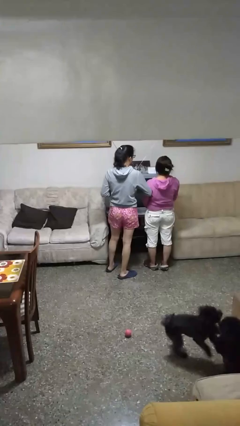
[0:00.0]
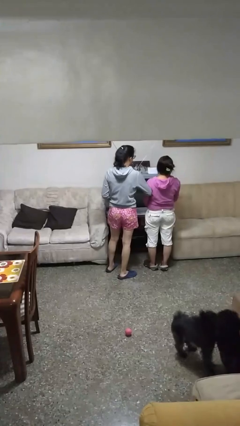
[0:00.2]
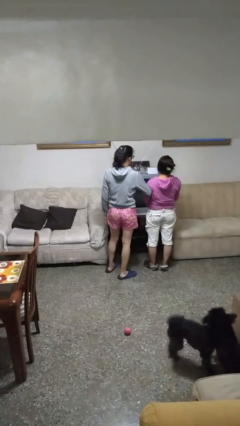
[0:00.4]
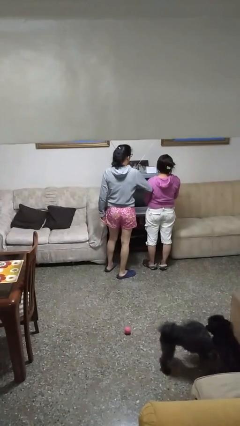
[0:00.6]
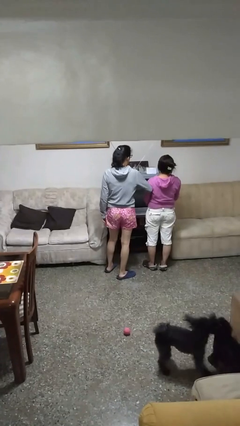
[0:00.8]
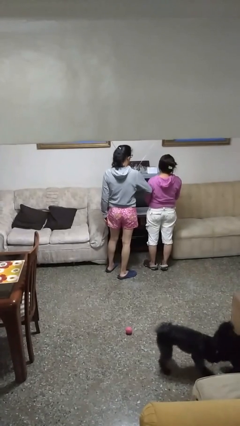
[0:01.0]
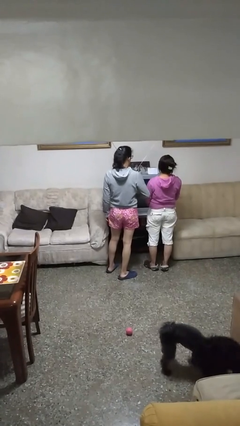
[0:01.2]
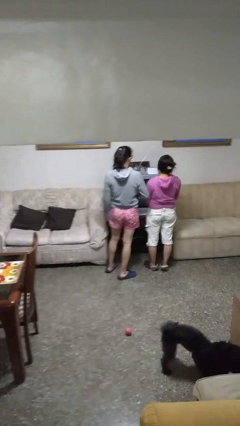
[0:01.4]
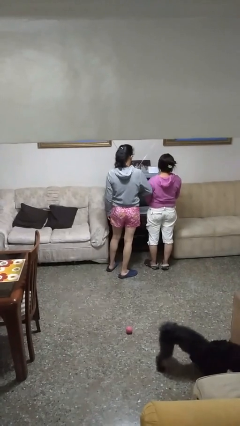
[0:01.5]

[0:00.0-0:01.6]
person nudges person with elbow

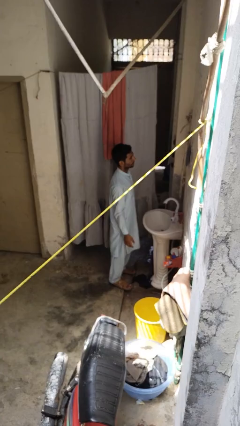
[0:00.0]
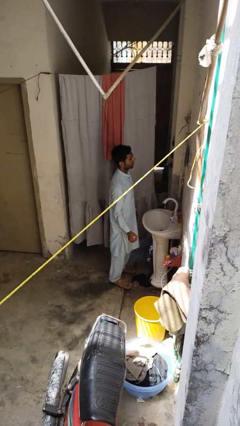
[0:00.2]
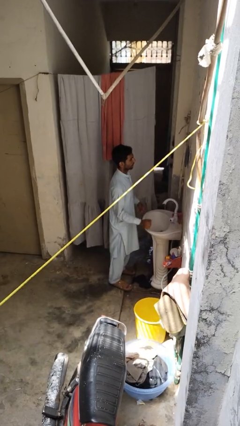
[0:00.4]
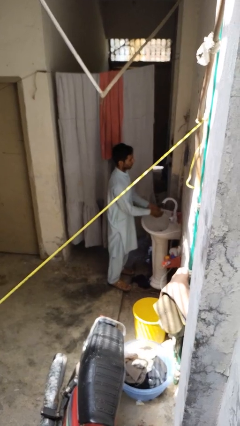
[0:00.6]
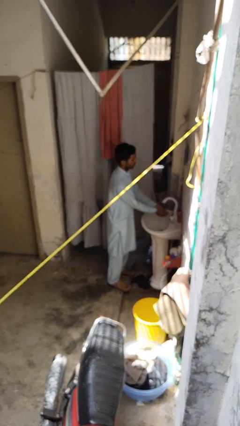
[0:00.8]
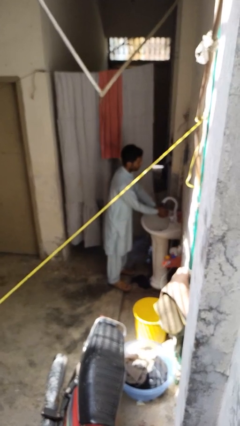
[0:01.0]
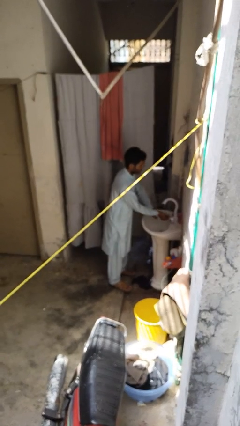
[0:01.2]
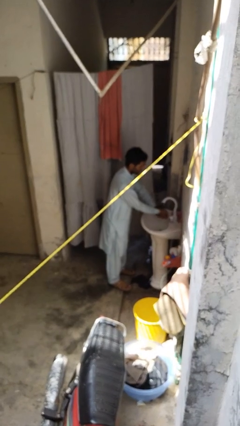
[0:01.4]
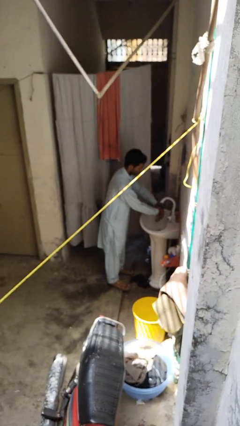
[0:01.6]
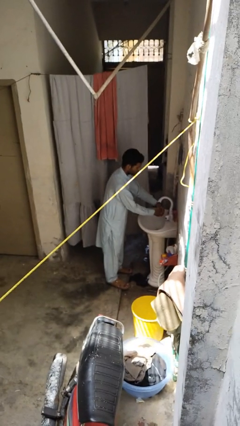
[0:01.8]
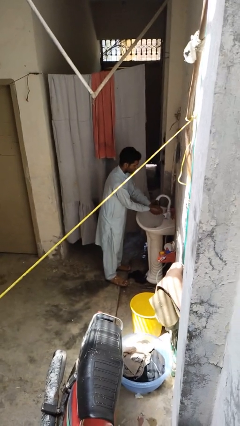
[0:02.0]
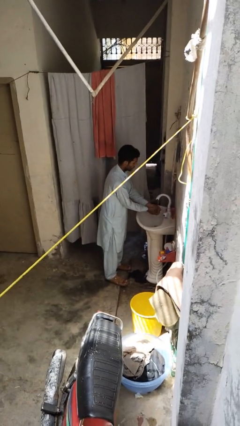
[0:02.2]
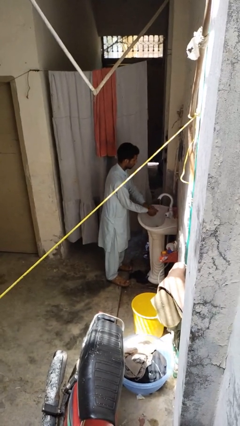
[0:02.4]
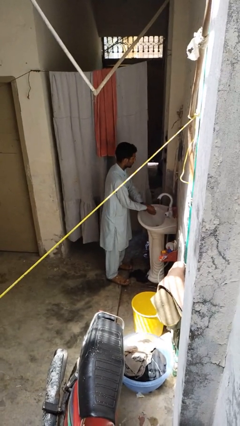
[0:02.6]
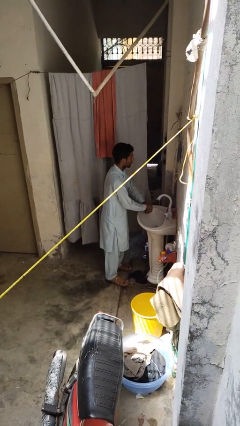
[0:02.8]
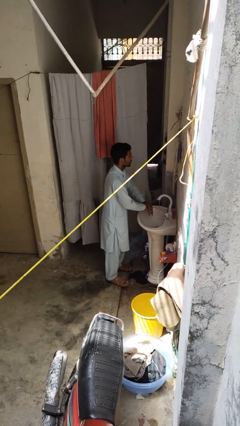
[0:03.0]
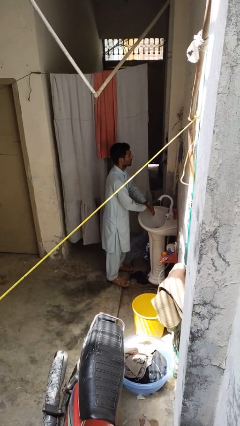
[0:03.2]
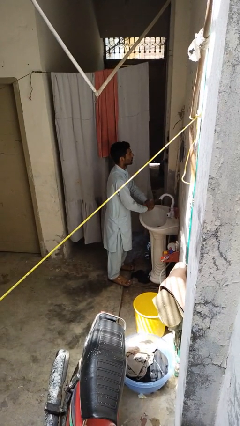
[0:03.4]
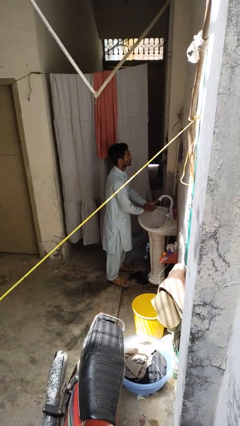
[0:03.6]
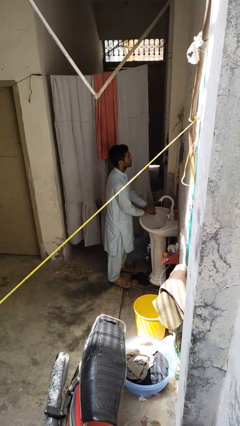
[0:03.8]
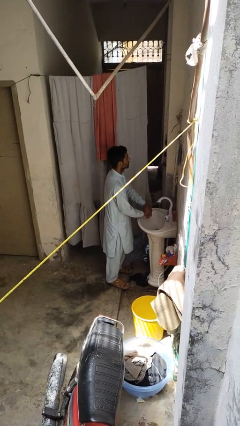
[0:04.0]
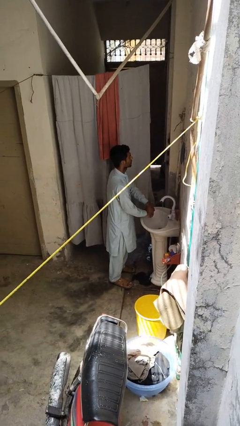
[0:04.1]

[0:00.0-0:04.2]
person washes hands

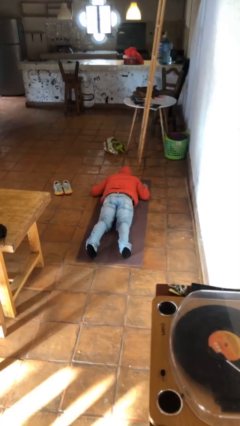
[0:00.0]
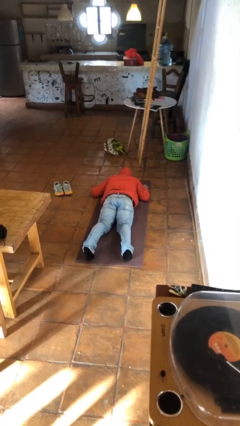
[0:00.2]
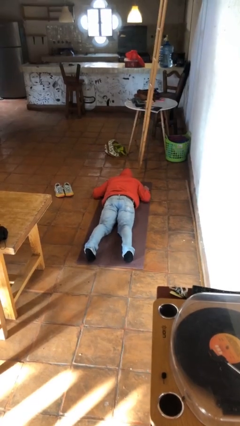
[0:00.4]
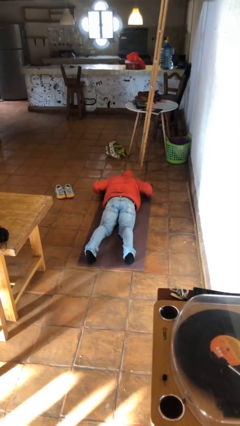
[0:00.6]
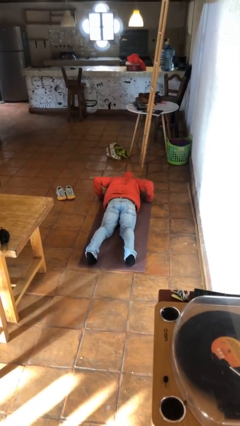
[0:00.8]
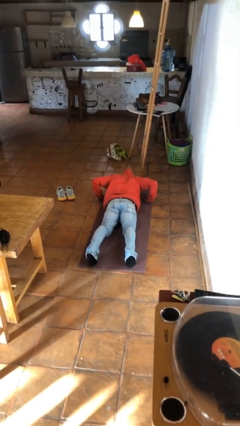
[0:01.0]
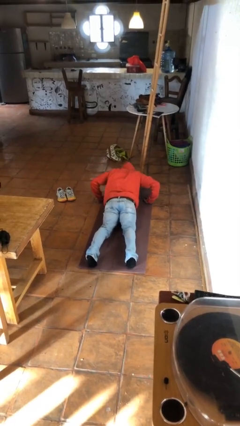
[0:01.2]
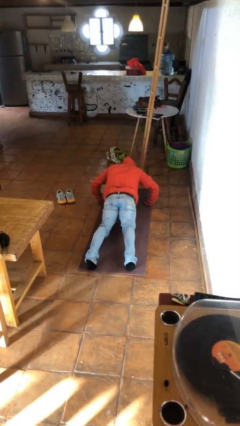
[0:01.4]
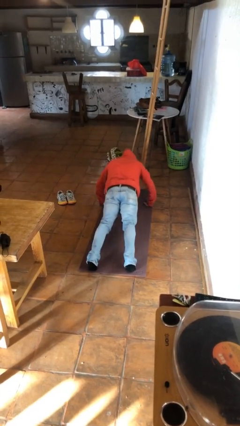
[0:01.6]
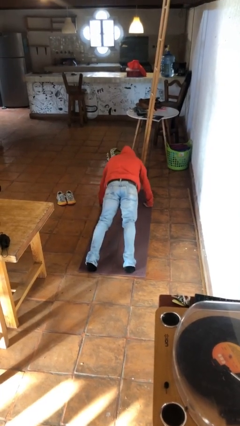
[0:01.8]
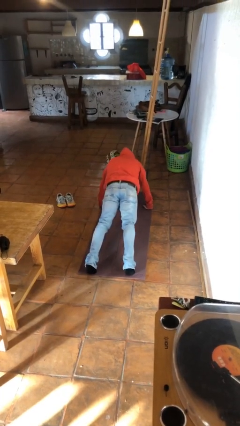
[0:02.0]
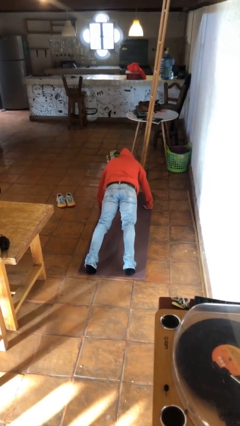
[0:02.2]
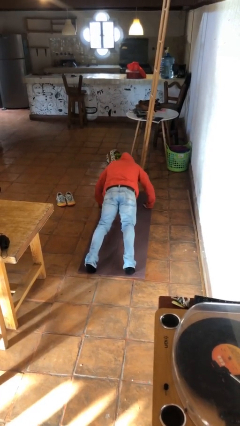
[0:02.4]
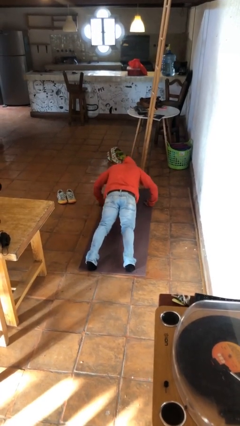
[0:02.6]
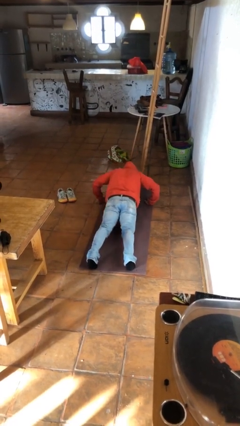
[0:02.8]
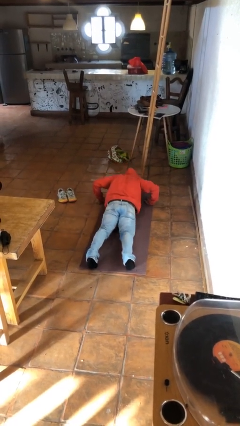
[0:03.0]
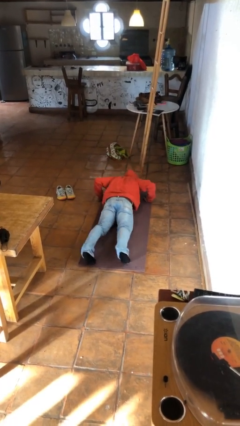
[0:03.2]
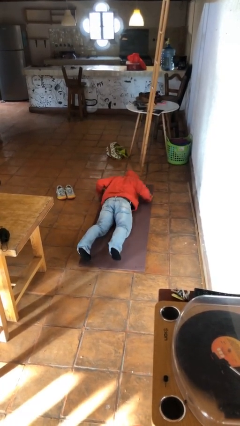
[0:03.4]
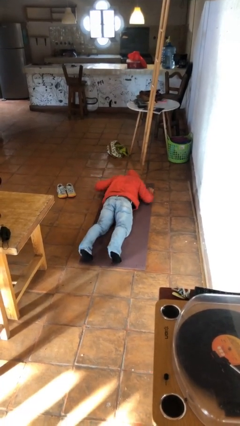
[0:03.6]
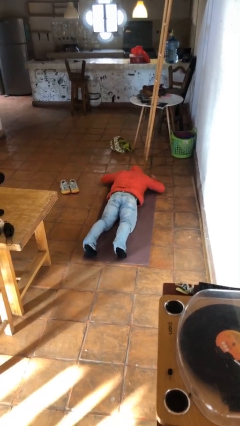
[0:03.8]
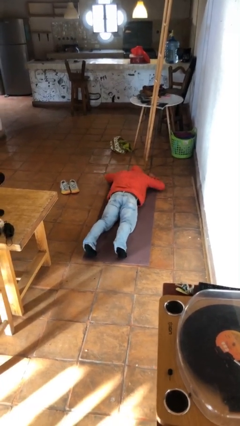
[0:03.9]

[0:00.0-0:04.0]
person exercises with pushup

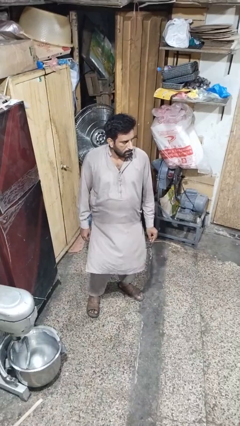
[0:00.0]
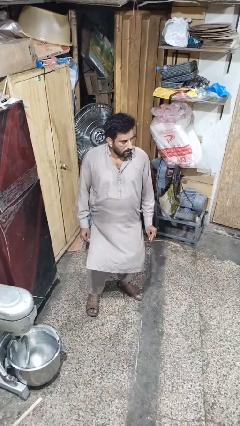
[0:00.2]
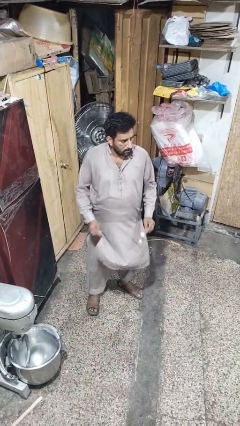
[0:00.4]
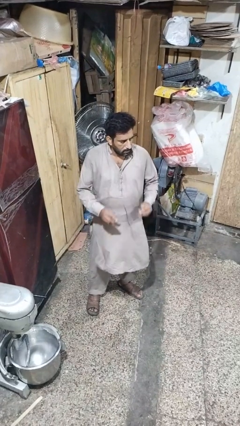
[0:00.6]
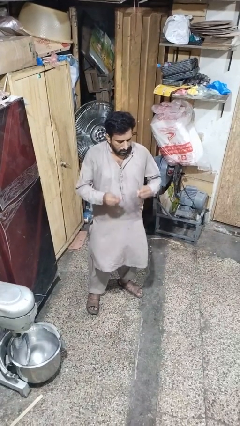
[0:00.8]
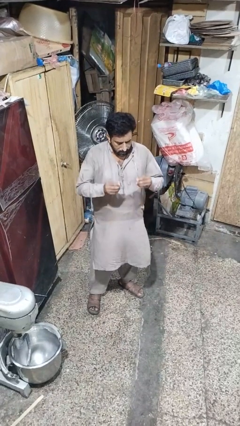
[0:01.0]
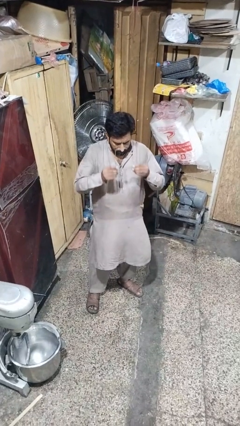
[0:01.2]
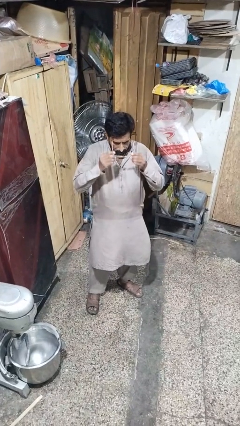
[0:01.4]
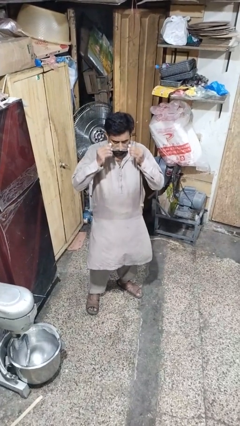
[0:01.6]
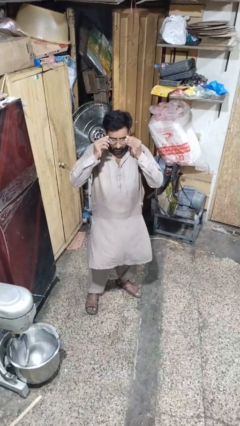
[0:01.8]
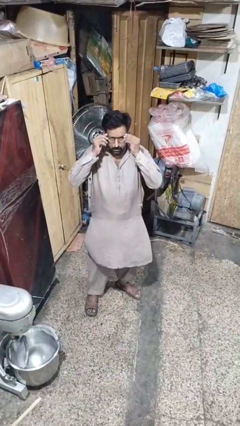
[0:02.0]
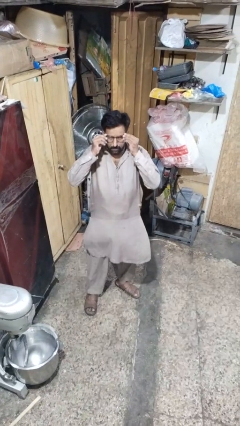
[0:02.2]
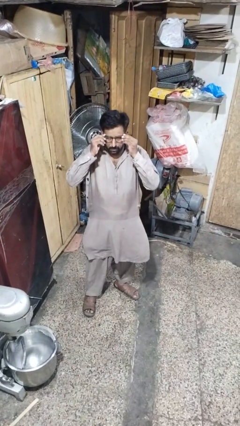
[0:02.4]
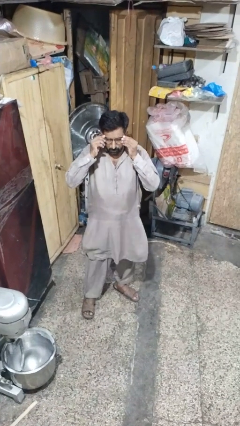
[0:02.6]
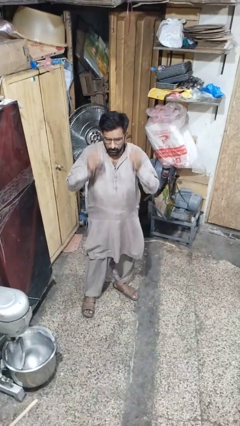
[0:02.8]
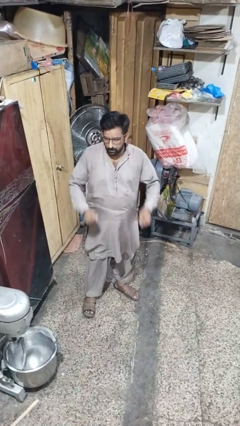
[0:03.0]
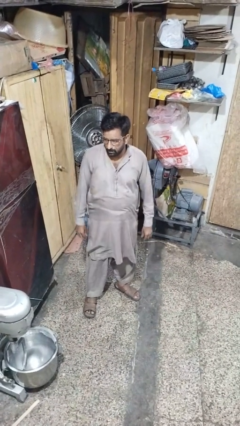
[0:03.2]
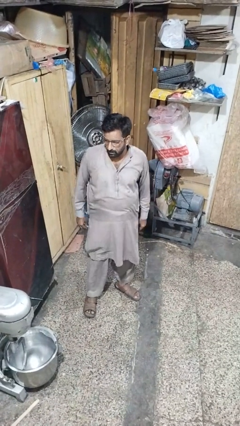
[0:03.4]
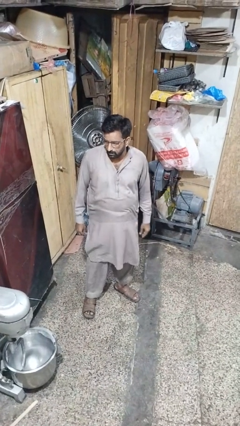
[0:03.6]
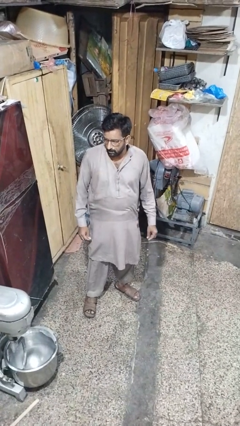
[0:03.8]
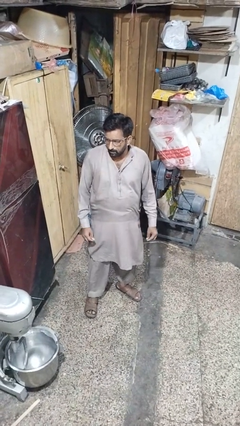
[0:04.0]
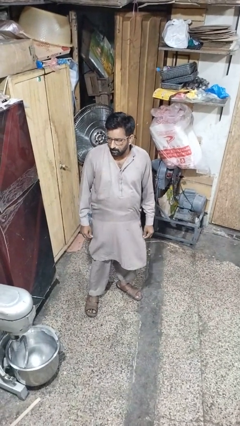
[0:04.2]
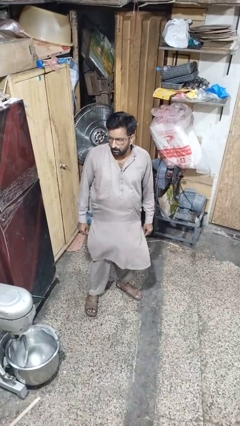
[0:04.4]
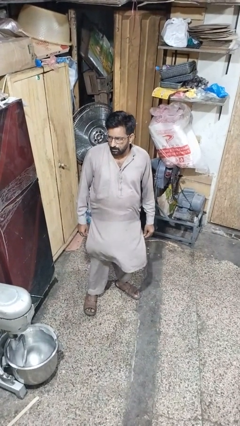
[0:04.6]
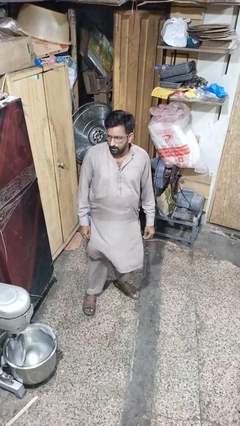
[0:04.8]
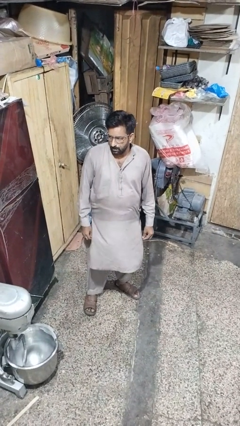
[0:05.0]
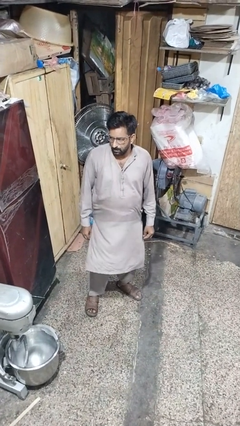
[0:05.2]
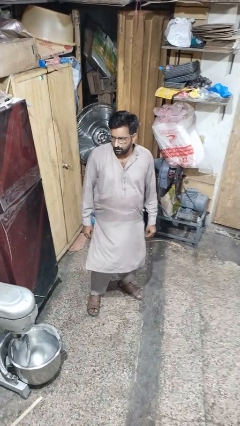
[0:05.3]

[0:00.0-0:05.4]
person puts on glasses

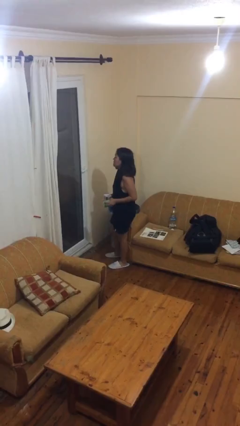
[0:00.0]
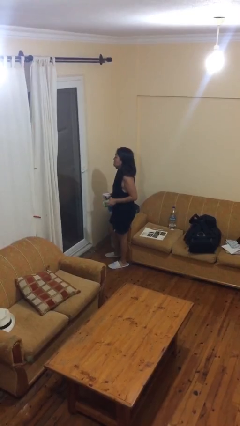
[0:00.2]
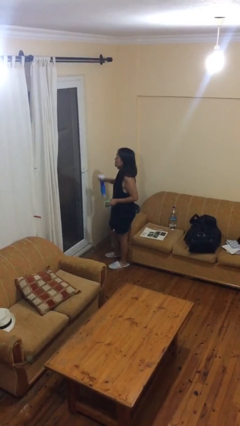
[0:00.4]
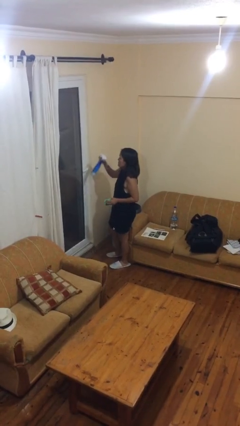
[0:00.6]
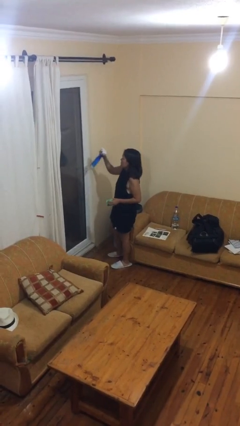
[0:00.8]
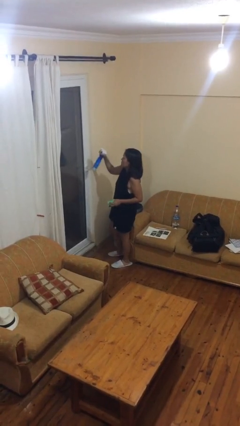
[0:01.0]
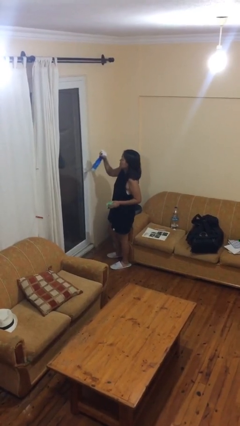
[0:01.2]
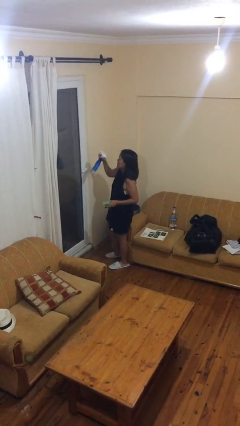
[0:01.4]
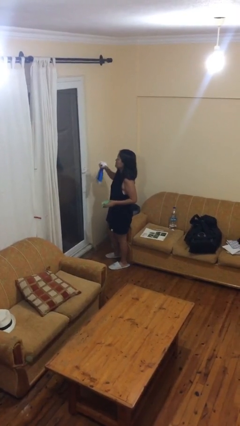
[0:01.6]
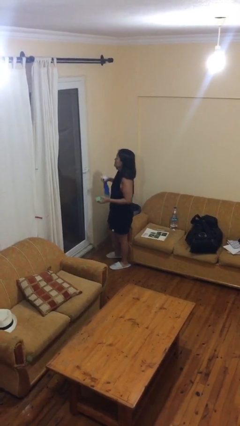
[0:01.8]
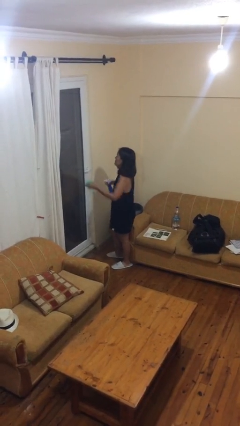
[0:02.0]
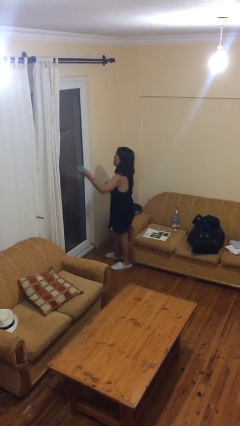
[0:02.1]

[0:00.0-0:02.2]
person sprays from bottle

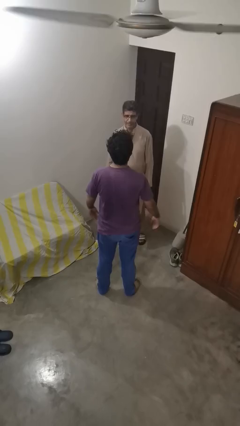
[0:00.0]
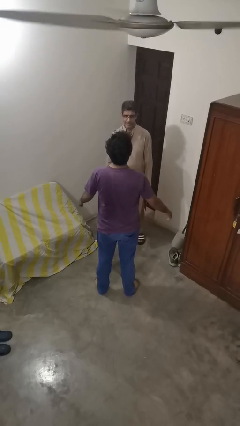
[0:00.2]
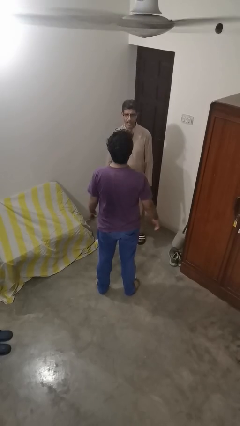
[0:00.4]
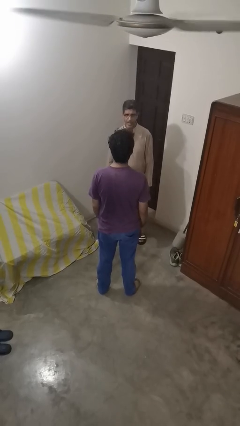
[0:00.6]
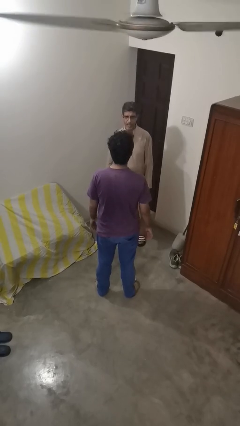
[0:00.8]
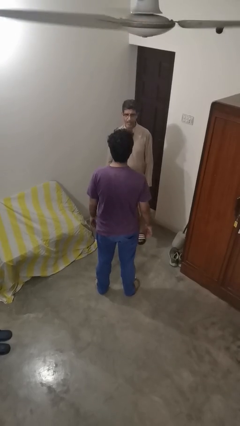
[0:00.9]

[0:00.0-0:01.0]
person laughs with person
